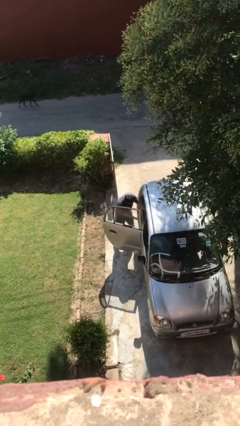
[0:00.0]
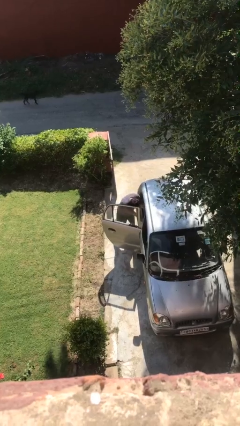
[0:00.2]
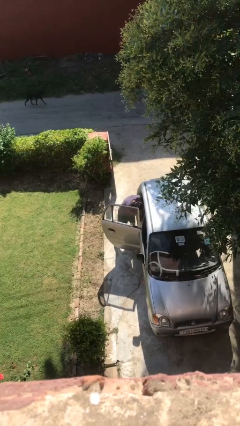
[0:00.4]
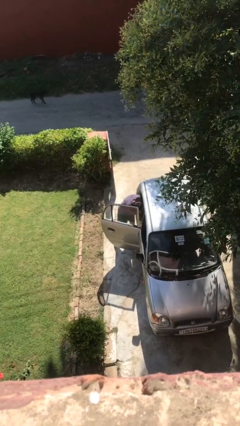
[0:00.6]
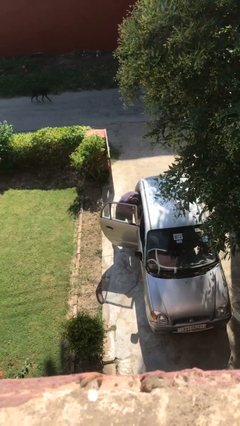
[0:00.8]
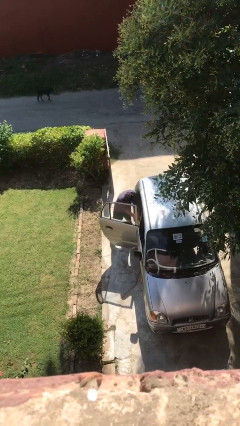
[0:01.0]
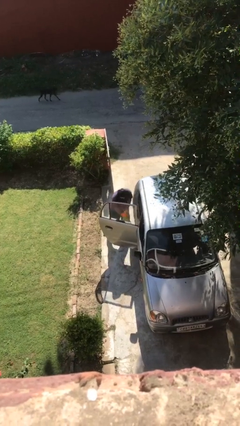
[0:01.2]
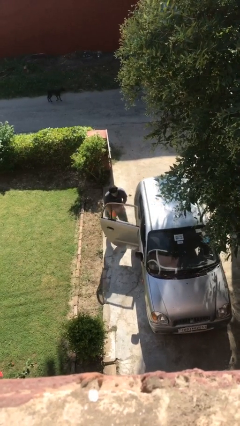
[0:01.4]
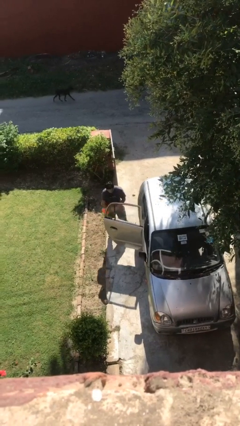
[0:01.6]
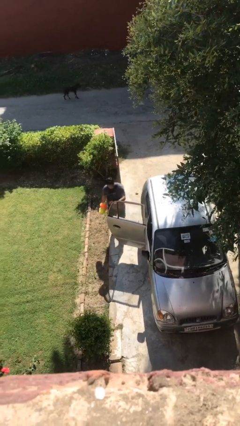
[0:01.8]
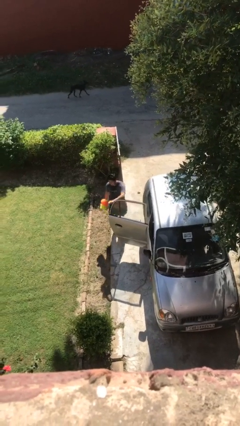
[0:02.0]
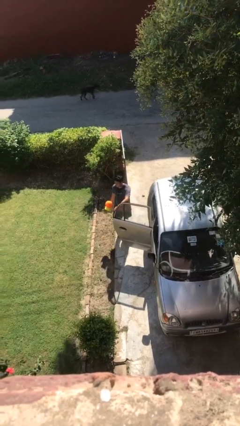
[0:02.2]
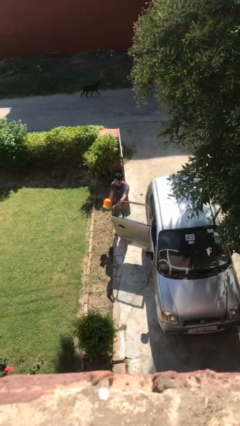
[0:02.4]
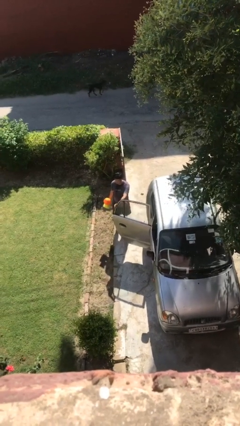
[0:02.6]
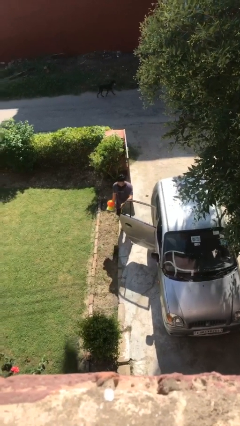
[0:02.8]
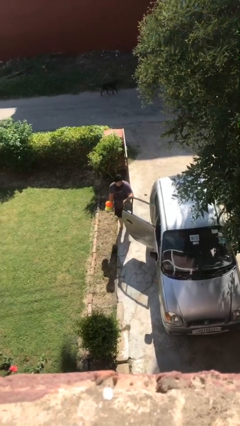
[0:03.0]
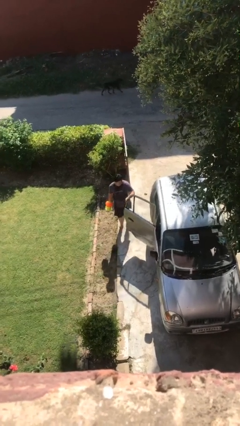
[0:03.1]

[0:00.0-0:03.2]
person unloads car

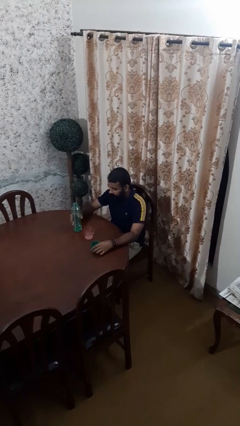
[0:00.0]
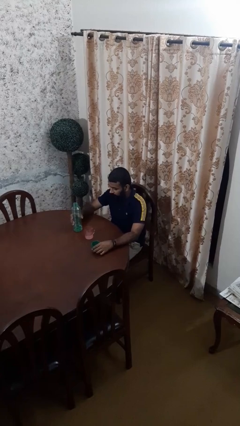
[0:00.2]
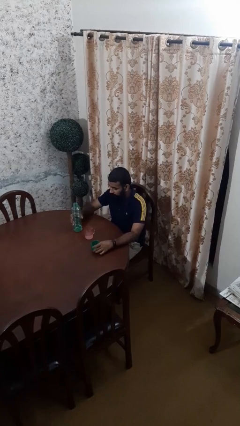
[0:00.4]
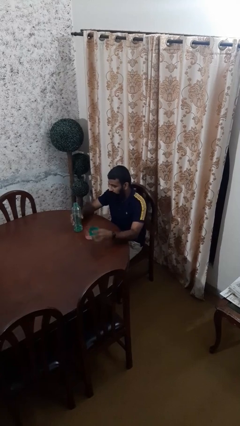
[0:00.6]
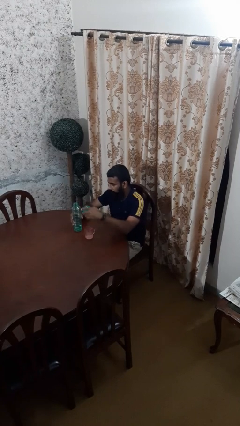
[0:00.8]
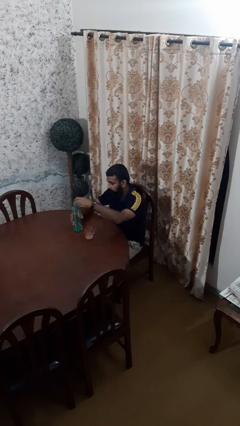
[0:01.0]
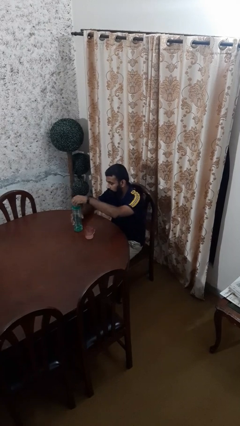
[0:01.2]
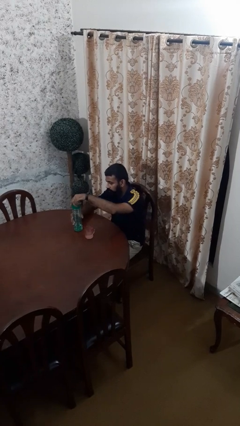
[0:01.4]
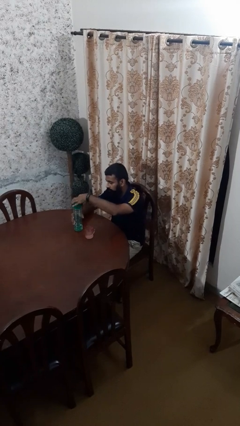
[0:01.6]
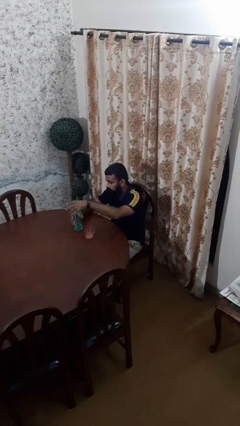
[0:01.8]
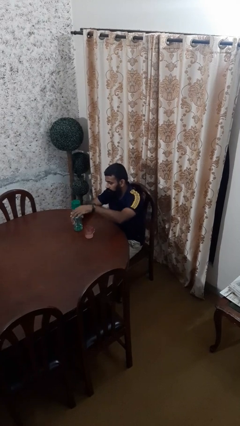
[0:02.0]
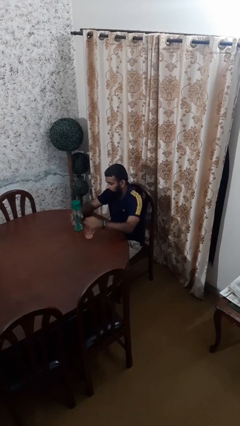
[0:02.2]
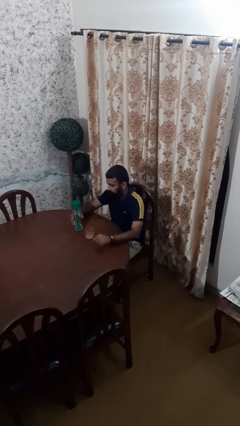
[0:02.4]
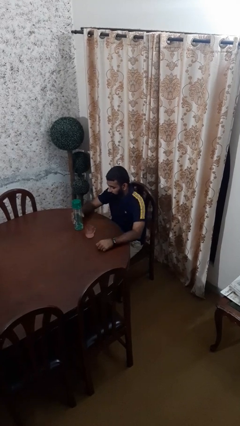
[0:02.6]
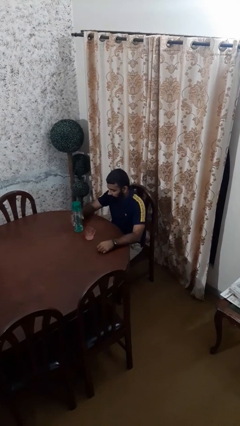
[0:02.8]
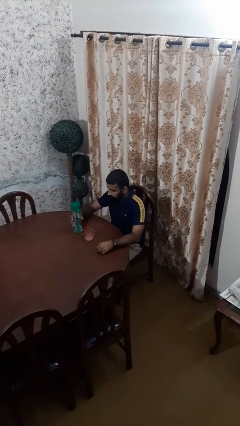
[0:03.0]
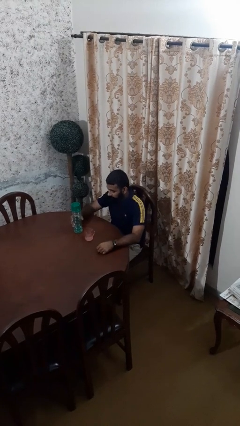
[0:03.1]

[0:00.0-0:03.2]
person screws lid to bottle

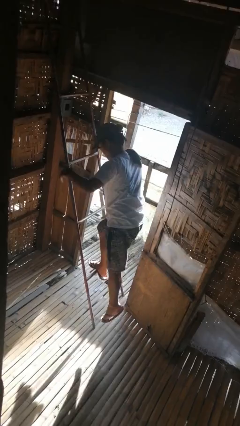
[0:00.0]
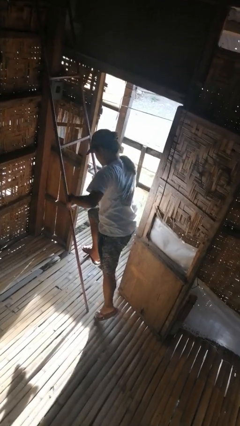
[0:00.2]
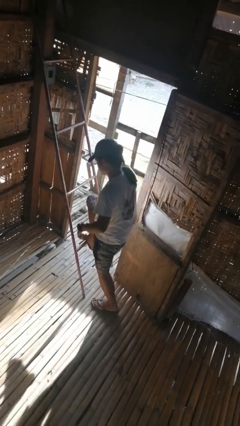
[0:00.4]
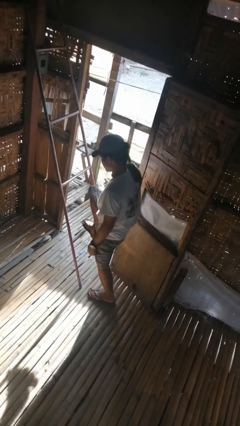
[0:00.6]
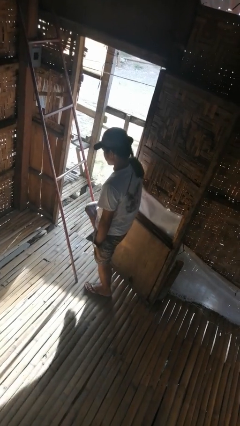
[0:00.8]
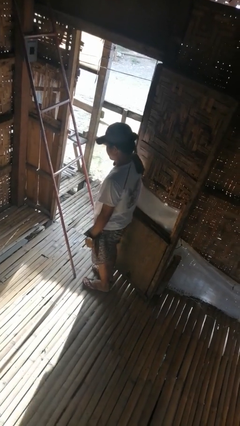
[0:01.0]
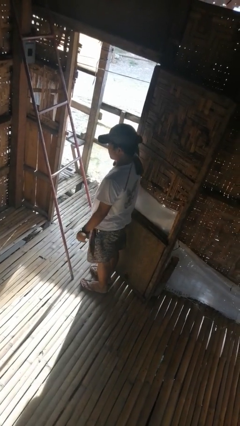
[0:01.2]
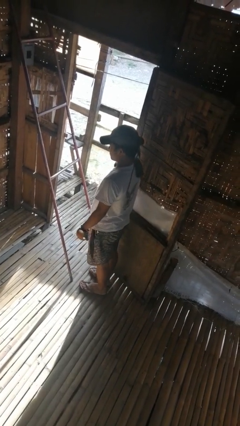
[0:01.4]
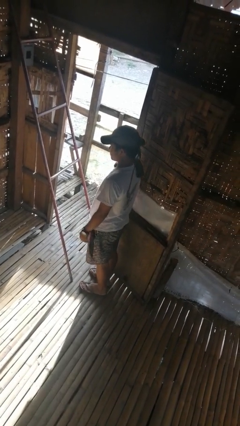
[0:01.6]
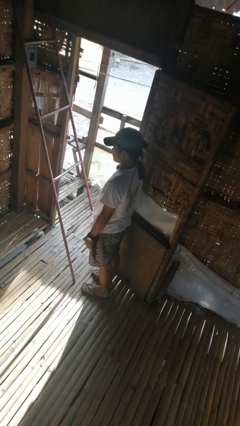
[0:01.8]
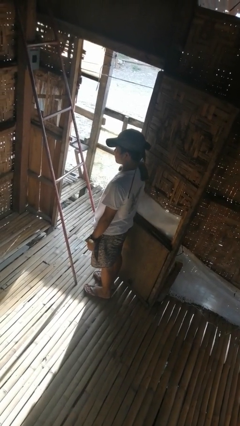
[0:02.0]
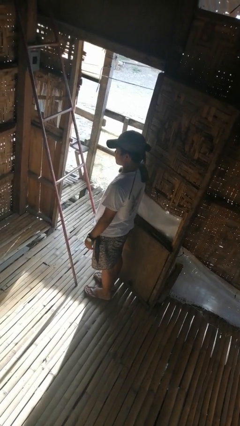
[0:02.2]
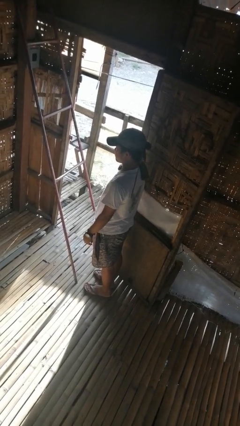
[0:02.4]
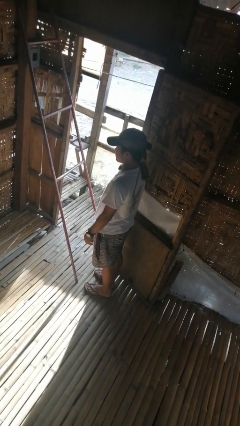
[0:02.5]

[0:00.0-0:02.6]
person climbs down ladder

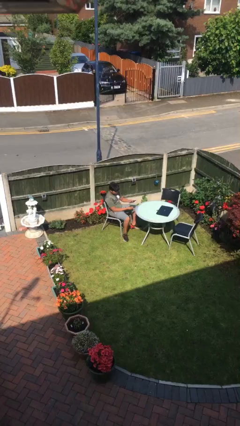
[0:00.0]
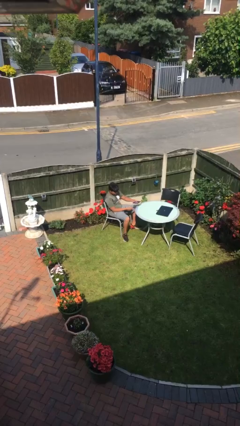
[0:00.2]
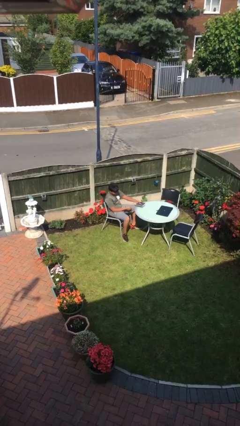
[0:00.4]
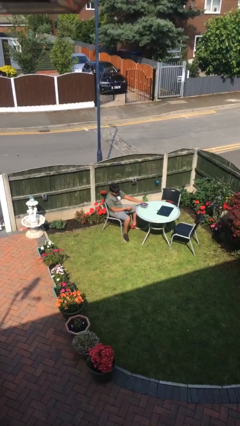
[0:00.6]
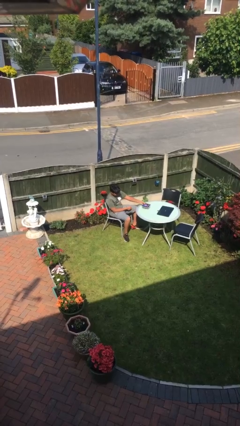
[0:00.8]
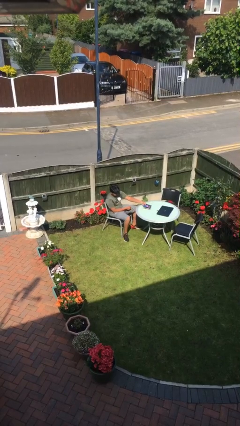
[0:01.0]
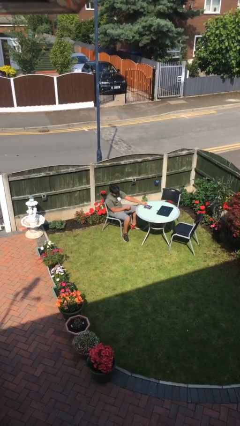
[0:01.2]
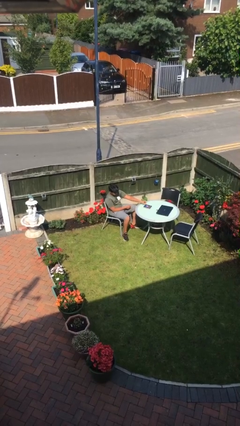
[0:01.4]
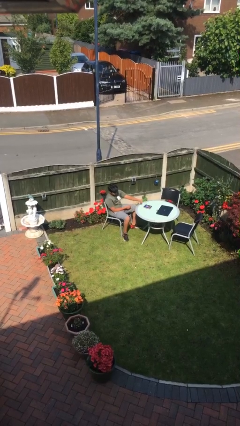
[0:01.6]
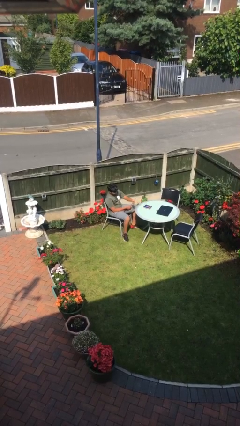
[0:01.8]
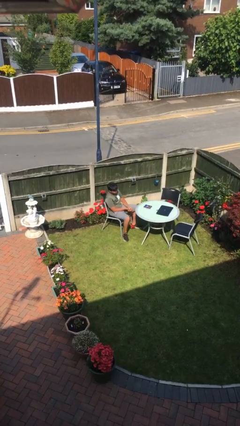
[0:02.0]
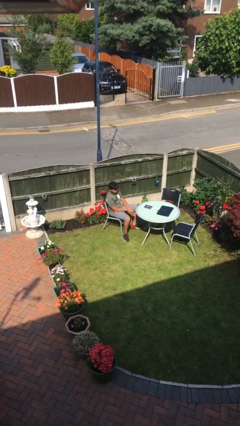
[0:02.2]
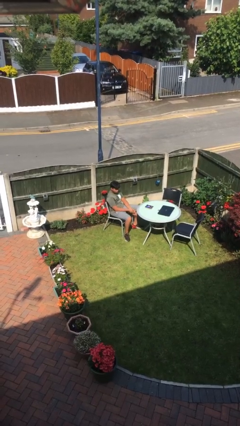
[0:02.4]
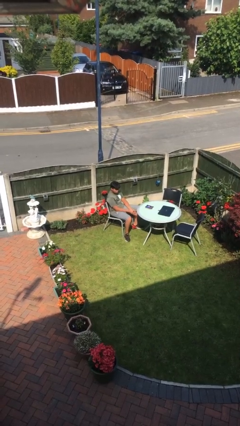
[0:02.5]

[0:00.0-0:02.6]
person puts down object on table

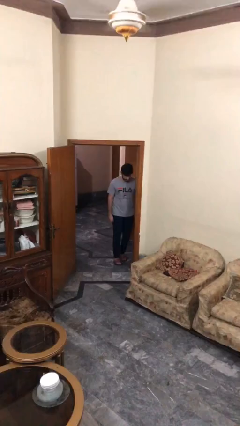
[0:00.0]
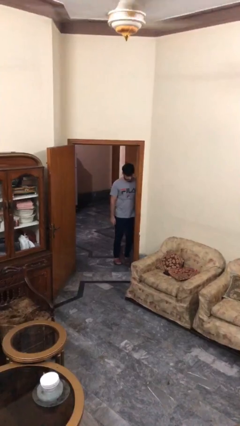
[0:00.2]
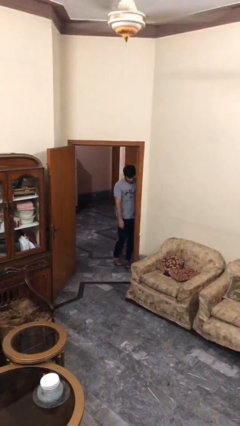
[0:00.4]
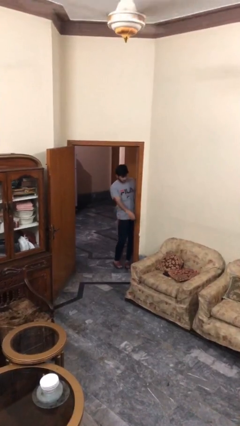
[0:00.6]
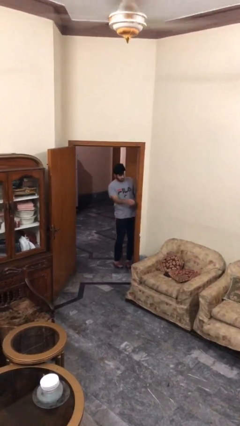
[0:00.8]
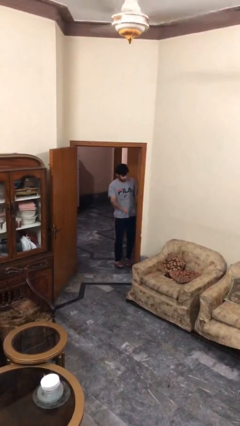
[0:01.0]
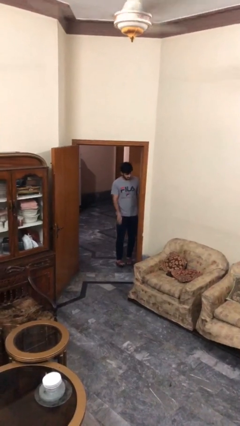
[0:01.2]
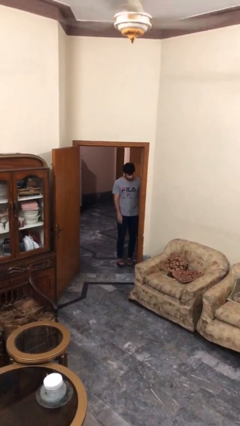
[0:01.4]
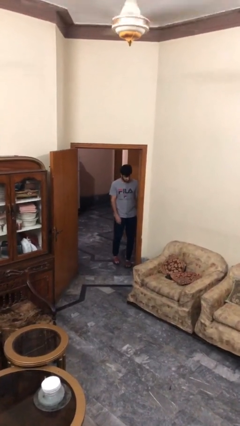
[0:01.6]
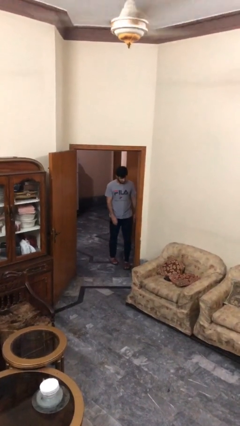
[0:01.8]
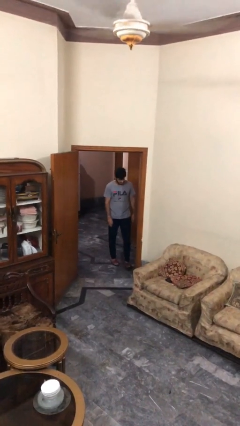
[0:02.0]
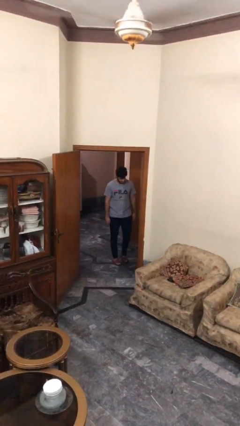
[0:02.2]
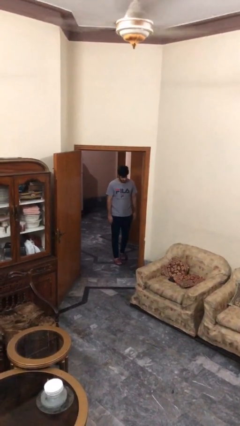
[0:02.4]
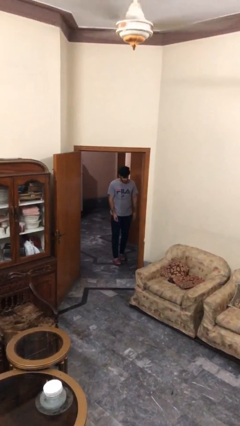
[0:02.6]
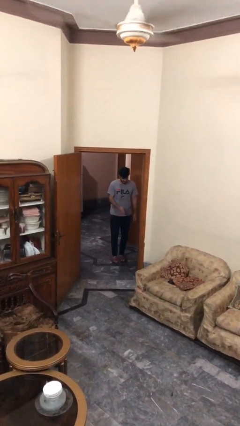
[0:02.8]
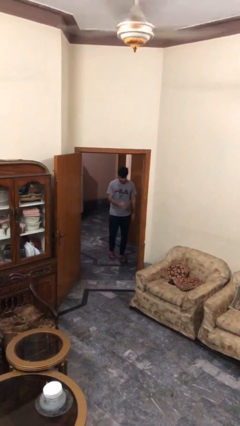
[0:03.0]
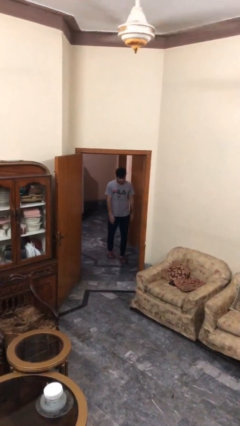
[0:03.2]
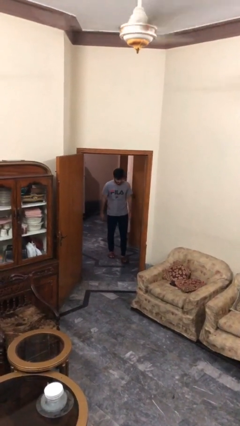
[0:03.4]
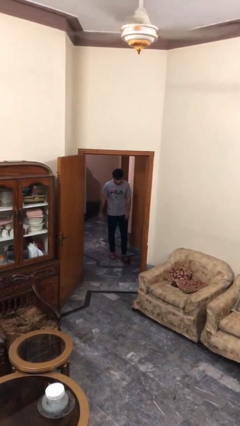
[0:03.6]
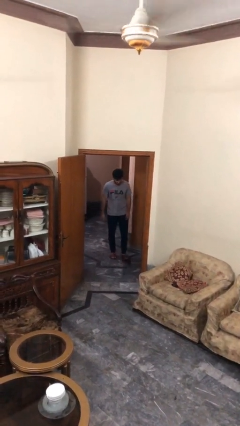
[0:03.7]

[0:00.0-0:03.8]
person bumps into wall

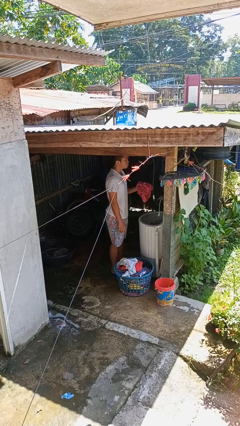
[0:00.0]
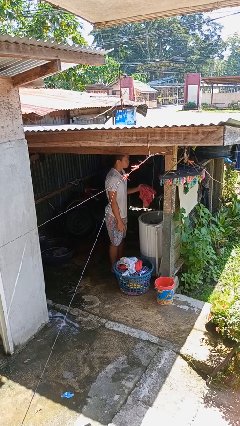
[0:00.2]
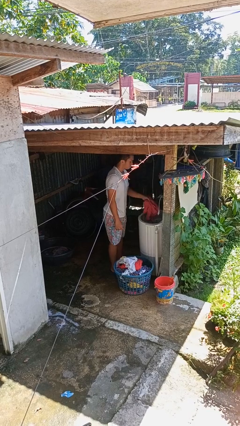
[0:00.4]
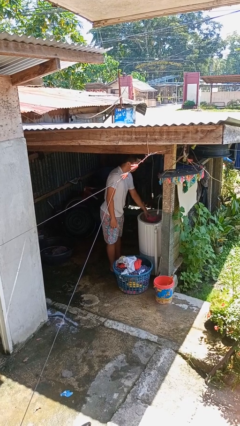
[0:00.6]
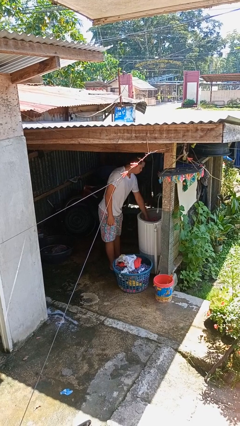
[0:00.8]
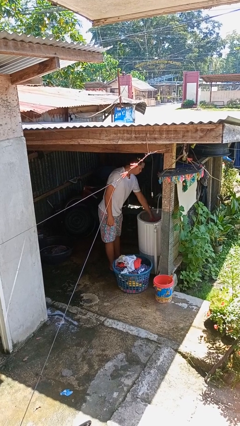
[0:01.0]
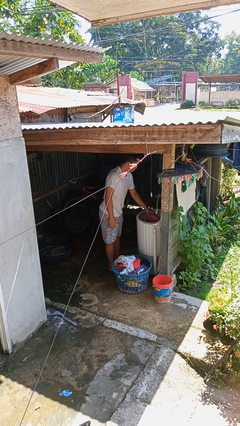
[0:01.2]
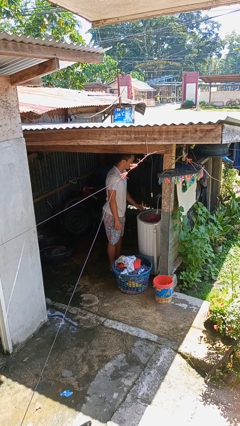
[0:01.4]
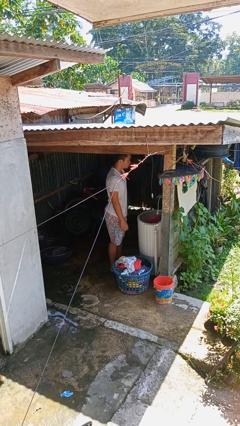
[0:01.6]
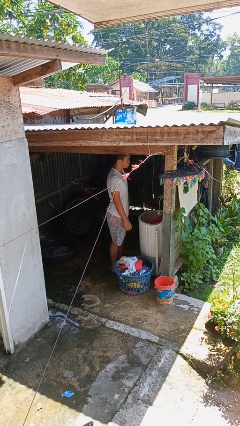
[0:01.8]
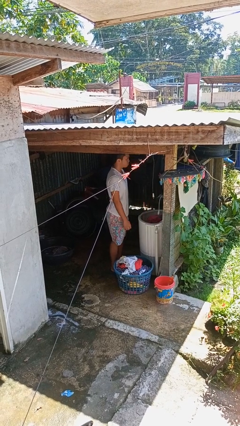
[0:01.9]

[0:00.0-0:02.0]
person loads clotheswasher

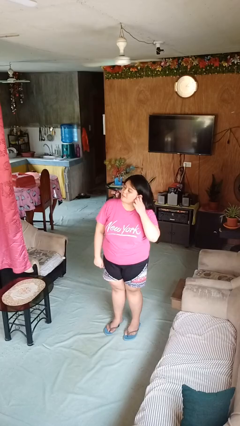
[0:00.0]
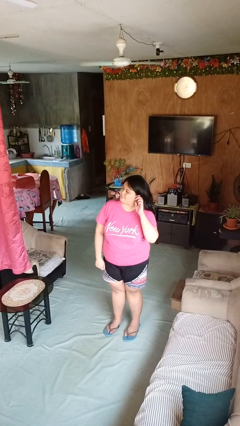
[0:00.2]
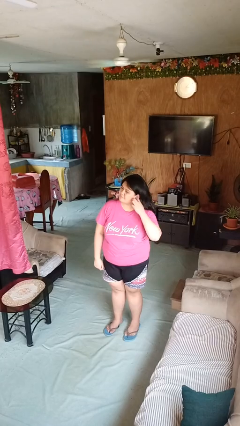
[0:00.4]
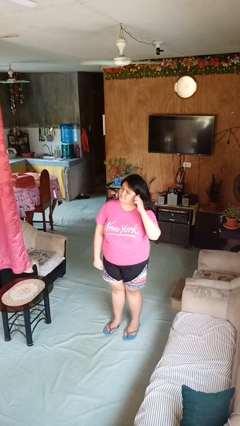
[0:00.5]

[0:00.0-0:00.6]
person touches earlobe
